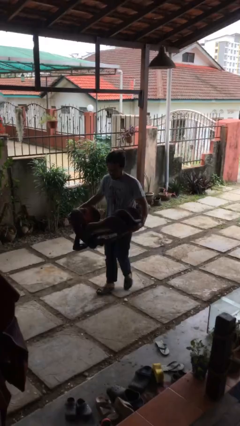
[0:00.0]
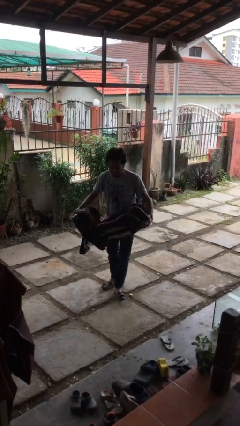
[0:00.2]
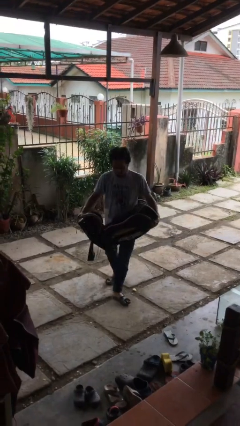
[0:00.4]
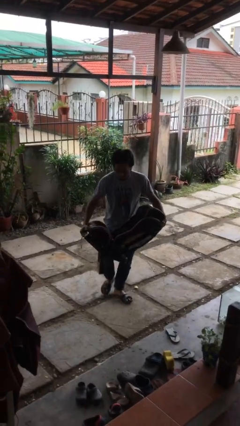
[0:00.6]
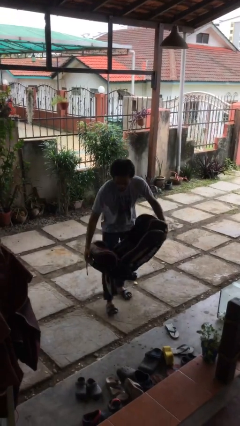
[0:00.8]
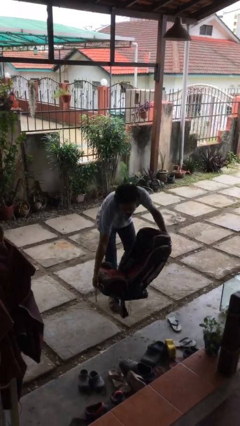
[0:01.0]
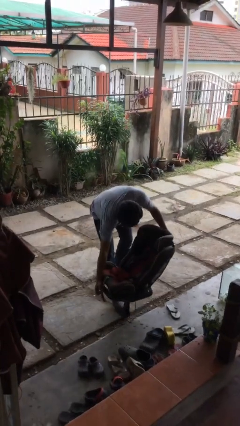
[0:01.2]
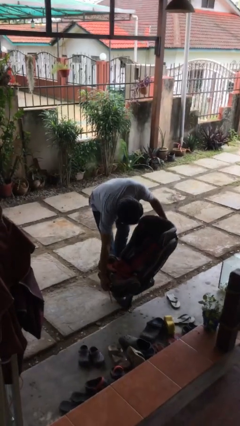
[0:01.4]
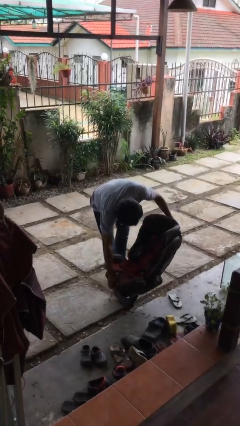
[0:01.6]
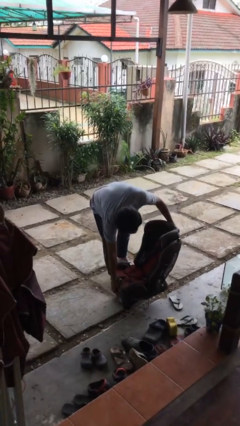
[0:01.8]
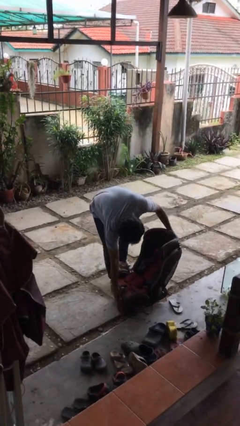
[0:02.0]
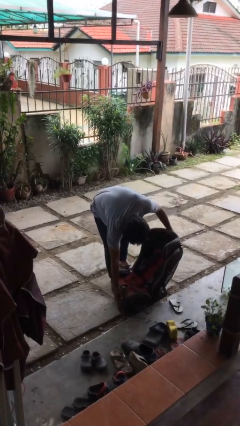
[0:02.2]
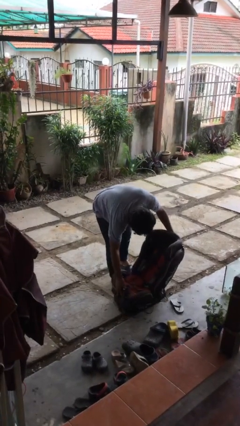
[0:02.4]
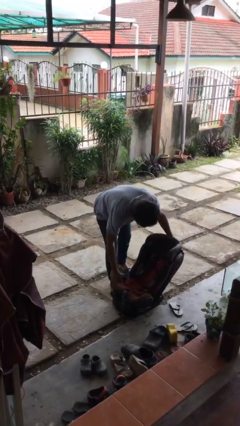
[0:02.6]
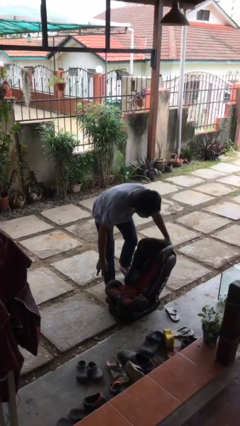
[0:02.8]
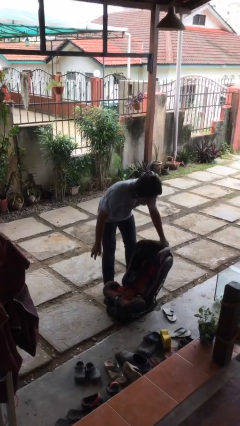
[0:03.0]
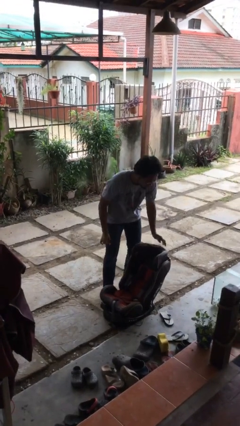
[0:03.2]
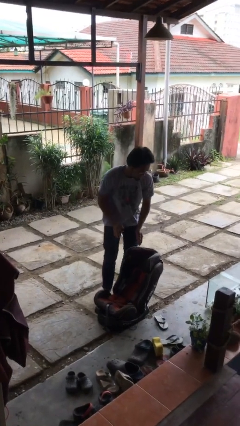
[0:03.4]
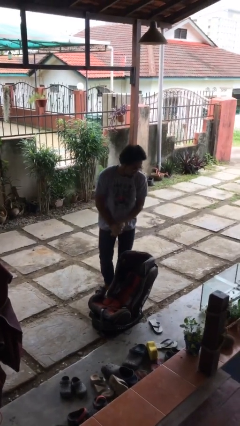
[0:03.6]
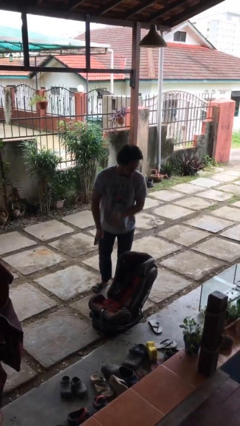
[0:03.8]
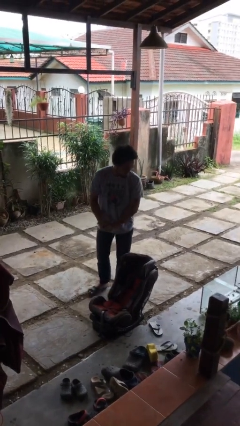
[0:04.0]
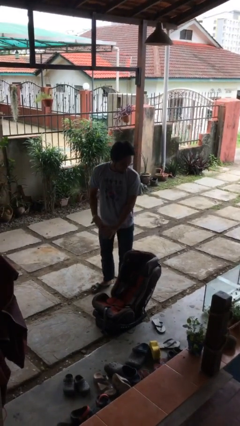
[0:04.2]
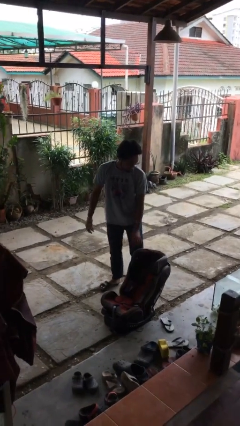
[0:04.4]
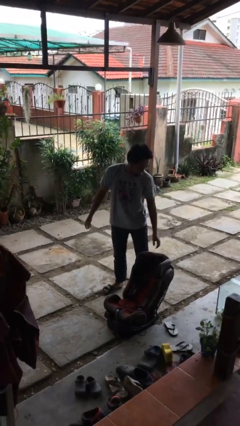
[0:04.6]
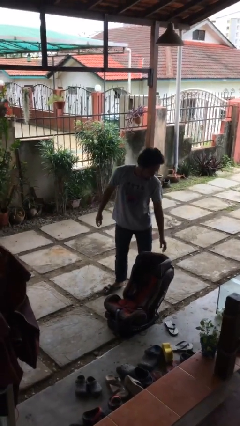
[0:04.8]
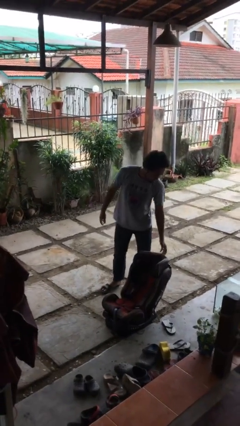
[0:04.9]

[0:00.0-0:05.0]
person puts down object on floor

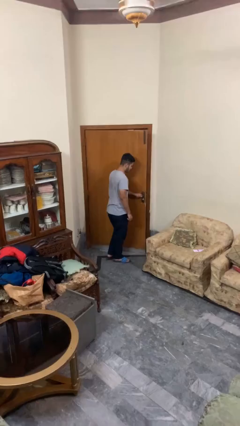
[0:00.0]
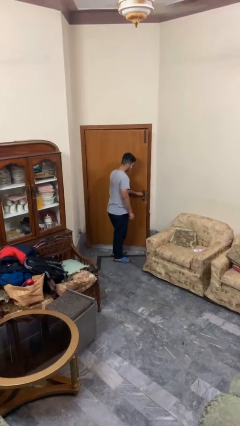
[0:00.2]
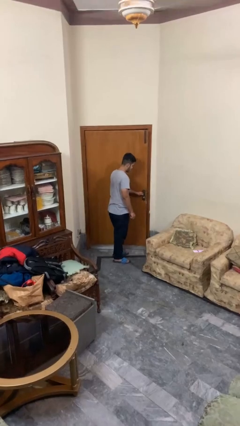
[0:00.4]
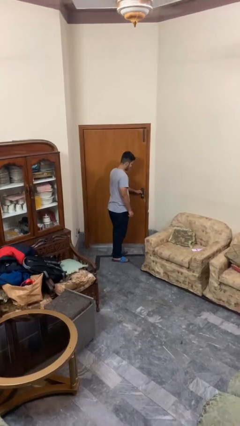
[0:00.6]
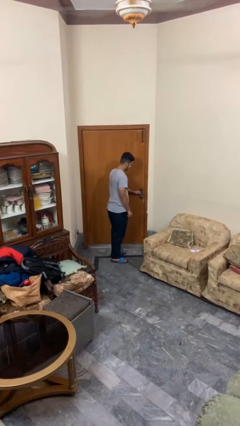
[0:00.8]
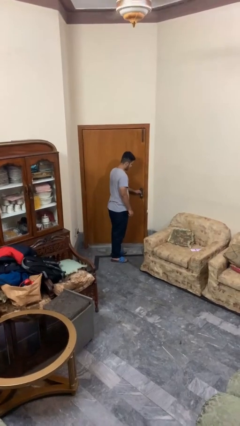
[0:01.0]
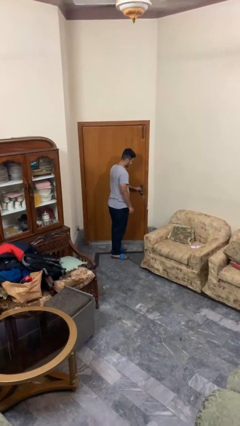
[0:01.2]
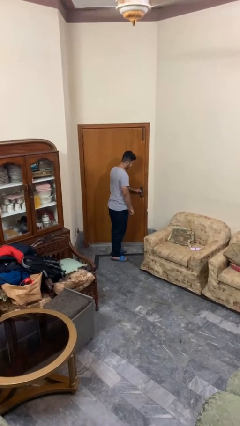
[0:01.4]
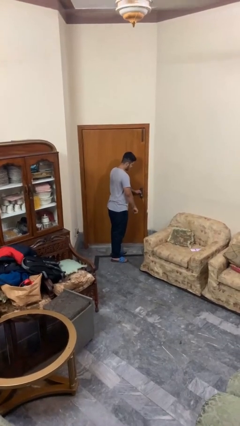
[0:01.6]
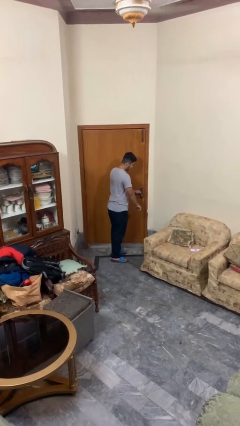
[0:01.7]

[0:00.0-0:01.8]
person closes facility door

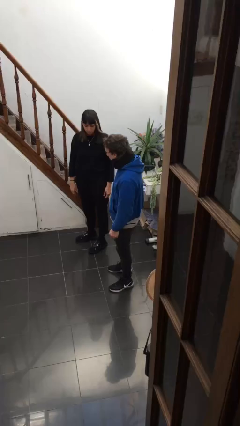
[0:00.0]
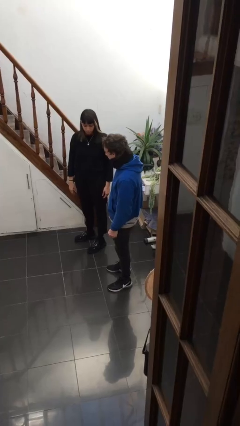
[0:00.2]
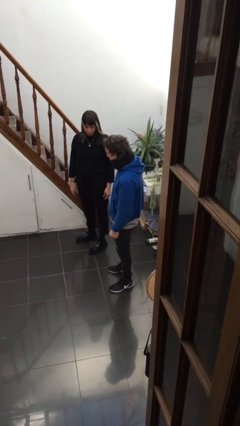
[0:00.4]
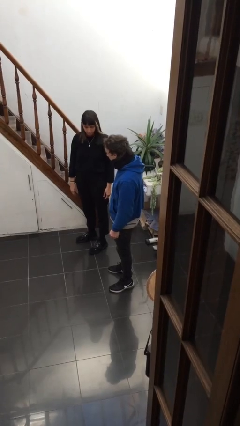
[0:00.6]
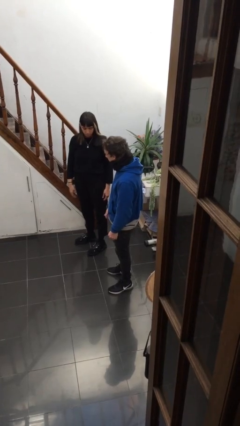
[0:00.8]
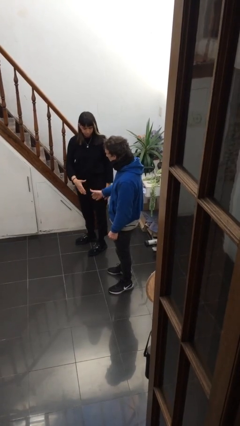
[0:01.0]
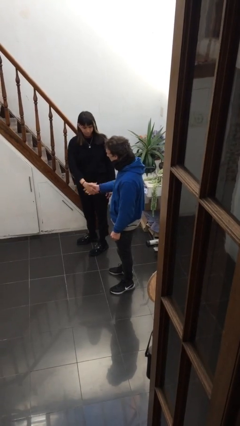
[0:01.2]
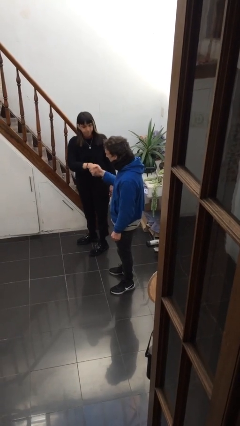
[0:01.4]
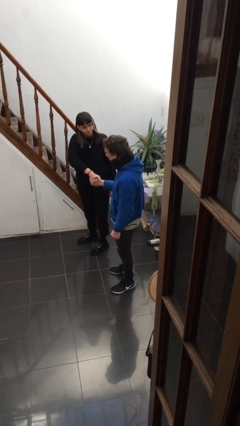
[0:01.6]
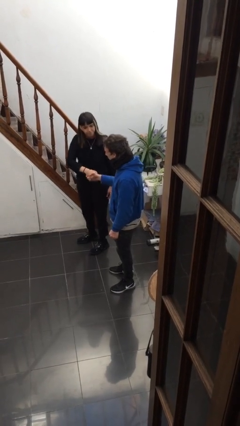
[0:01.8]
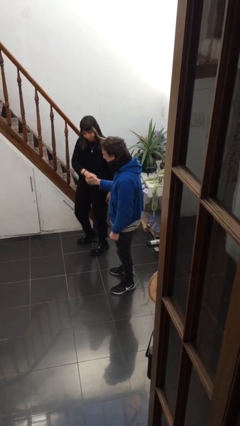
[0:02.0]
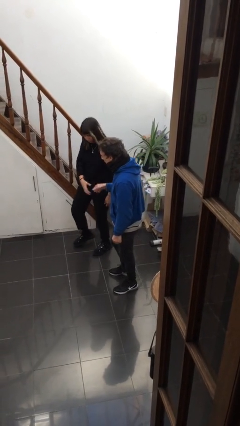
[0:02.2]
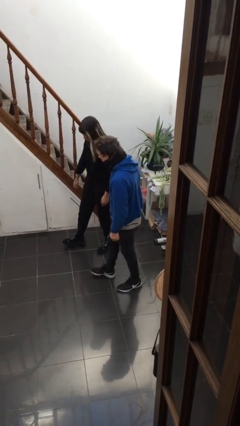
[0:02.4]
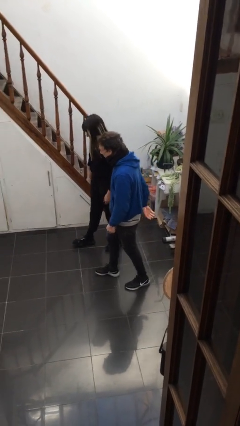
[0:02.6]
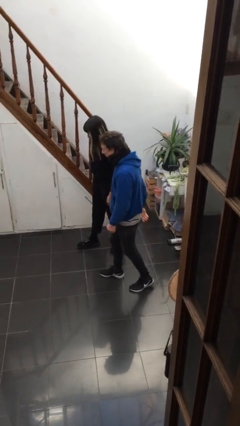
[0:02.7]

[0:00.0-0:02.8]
person shakes hand

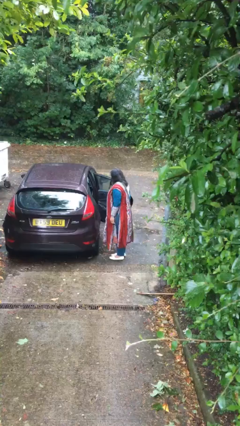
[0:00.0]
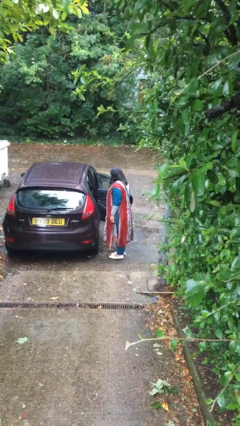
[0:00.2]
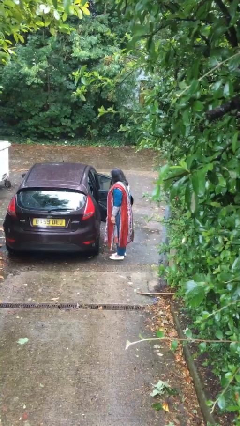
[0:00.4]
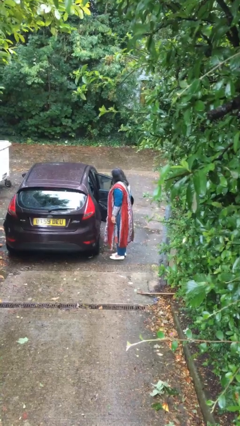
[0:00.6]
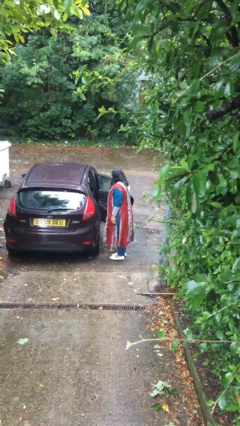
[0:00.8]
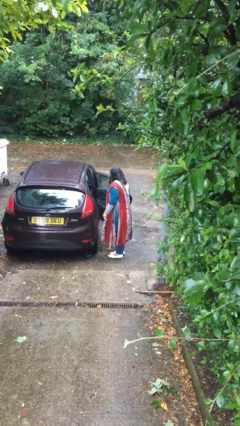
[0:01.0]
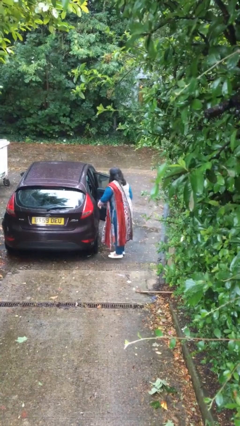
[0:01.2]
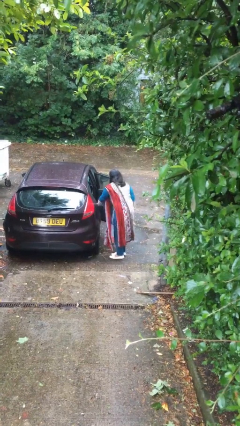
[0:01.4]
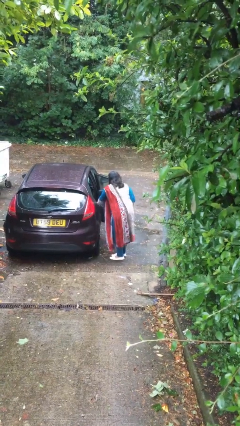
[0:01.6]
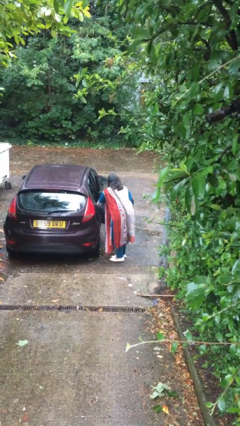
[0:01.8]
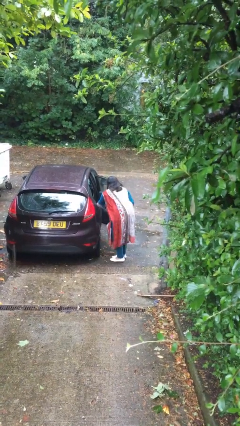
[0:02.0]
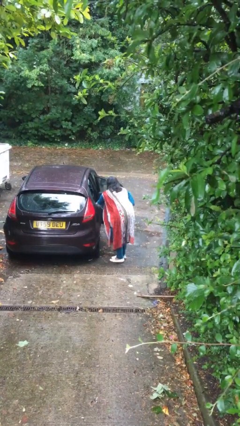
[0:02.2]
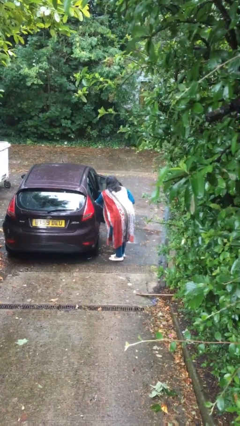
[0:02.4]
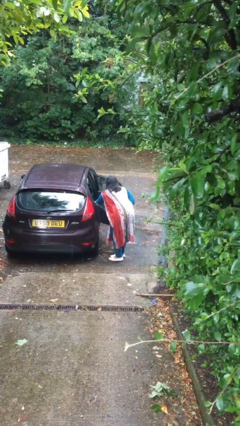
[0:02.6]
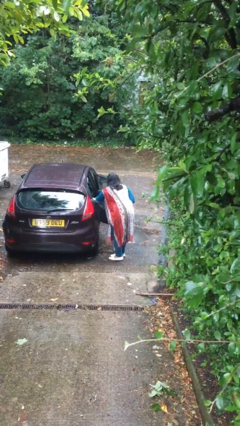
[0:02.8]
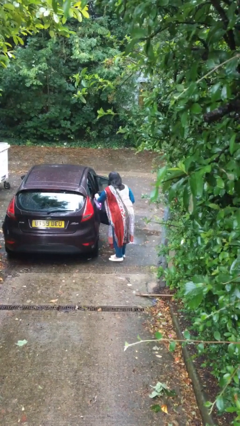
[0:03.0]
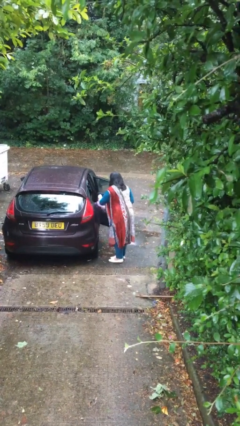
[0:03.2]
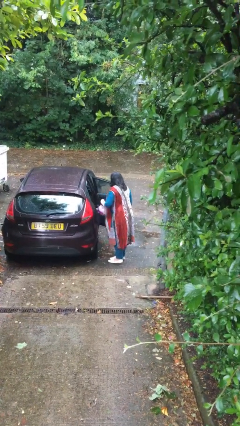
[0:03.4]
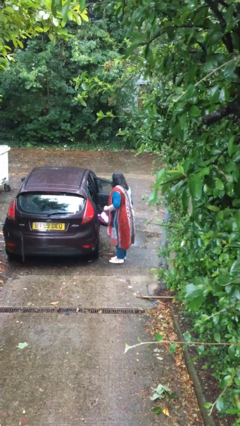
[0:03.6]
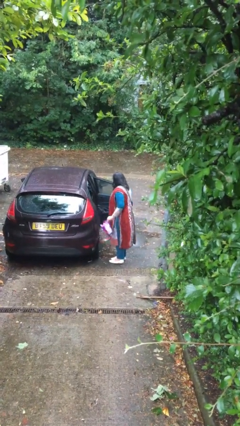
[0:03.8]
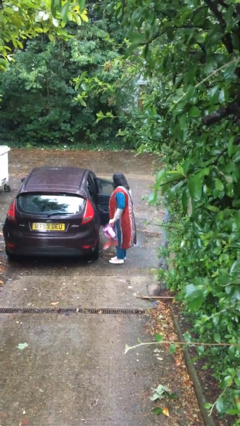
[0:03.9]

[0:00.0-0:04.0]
person unloads car

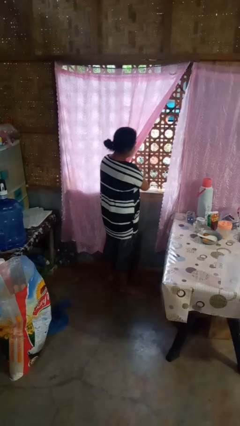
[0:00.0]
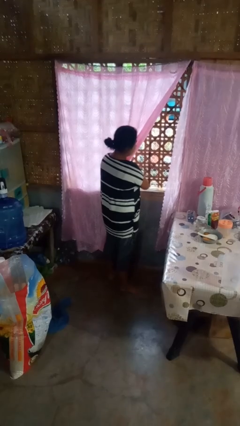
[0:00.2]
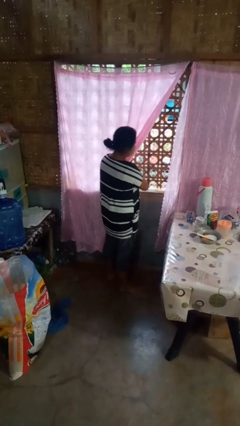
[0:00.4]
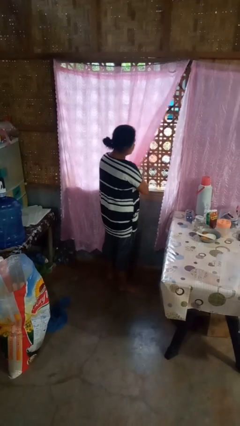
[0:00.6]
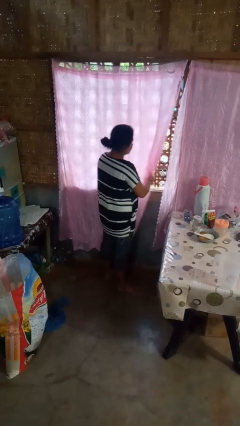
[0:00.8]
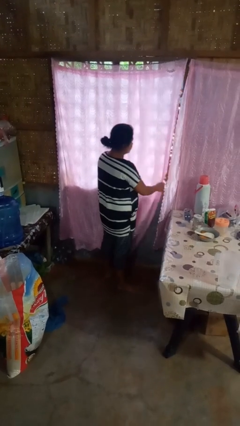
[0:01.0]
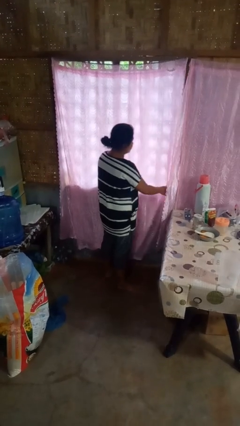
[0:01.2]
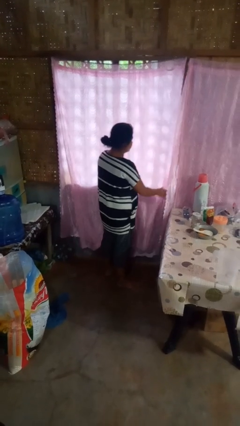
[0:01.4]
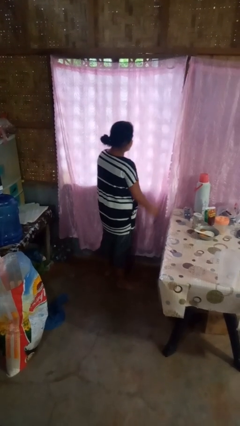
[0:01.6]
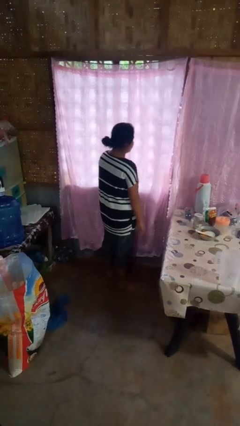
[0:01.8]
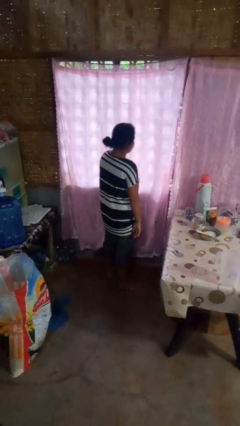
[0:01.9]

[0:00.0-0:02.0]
person closes curtains

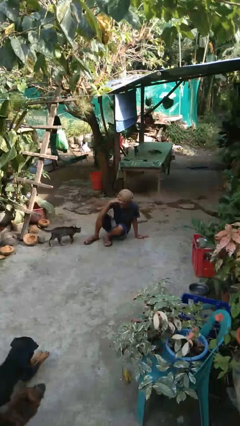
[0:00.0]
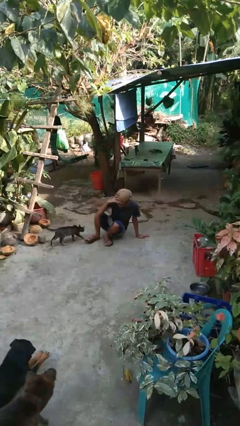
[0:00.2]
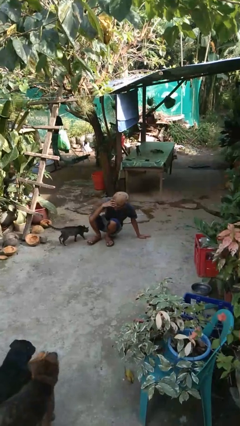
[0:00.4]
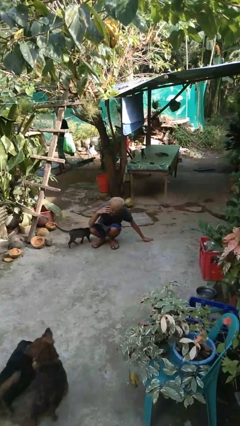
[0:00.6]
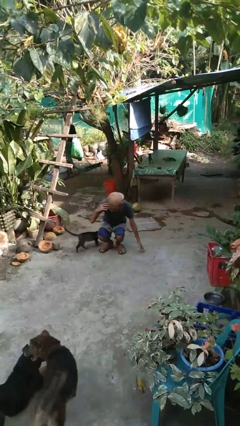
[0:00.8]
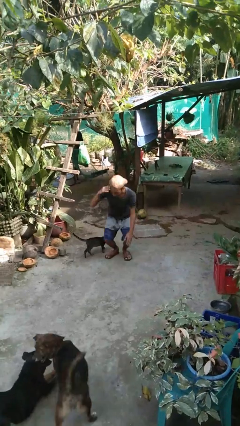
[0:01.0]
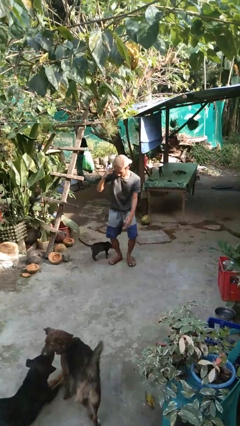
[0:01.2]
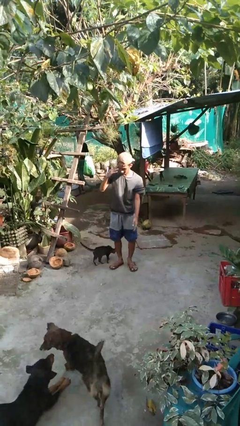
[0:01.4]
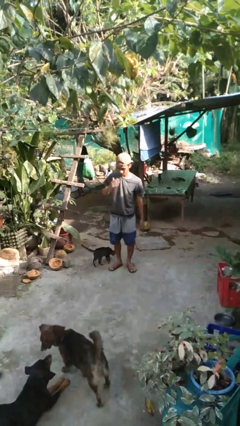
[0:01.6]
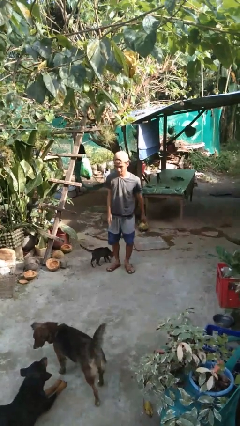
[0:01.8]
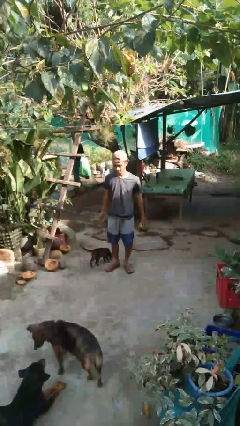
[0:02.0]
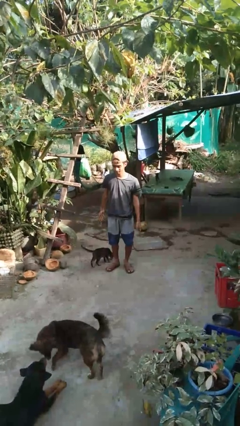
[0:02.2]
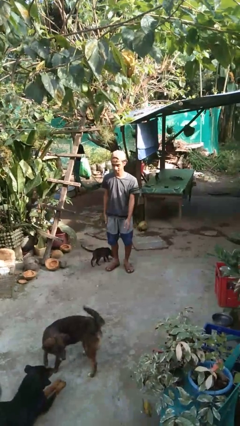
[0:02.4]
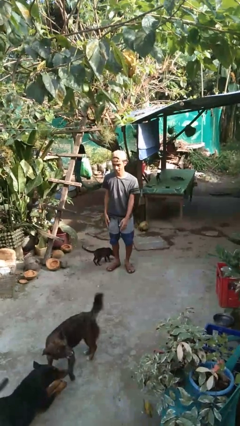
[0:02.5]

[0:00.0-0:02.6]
person stands up from floor
